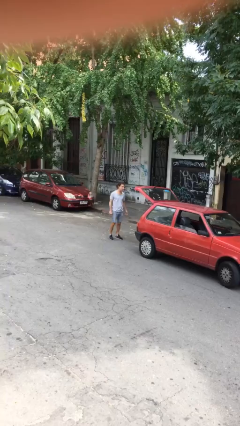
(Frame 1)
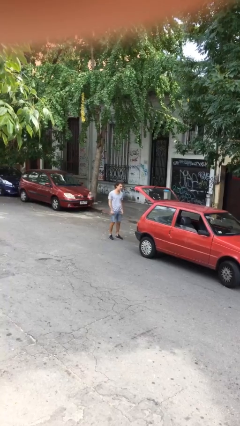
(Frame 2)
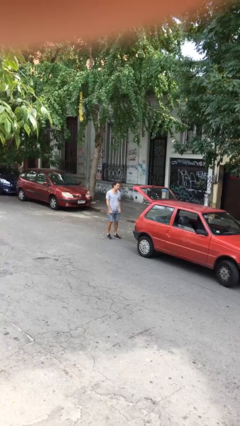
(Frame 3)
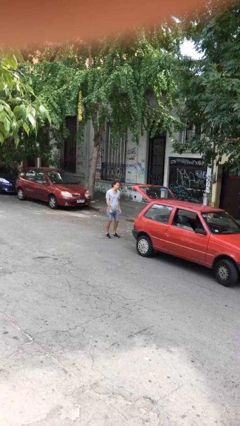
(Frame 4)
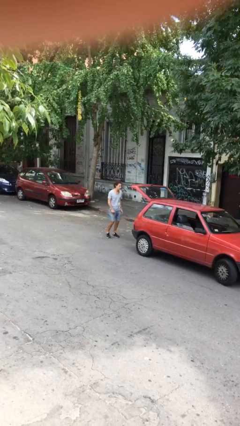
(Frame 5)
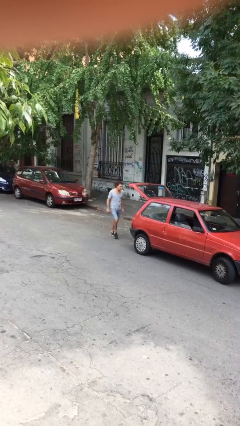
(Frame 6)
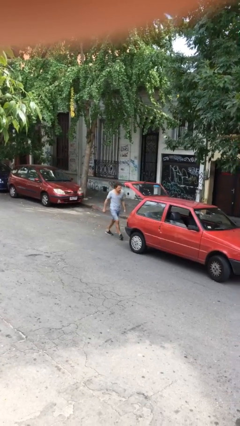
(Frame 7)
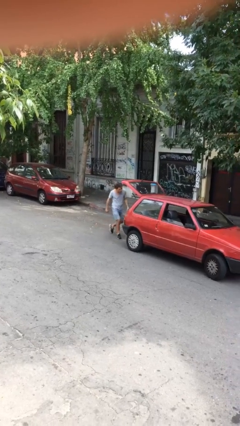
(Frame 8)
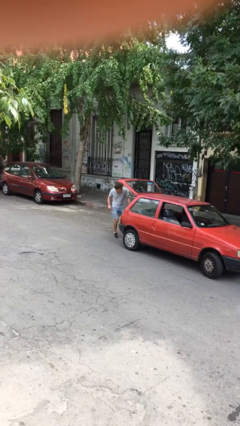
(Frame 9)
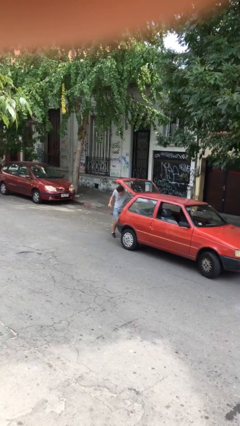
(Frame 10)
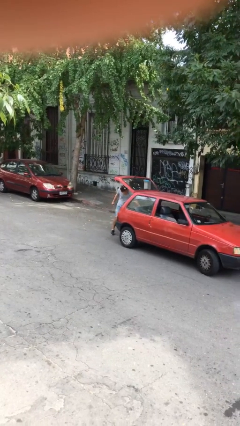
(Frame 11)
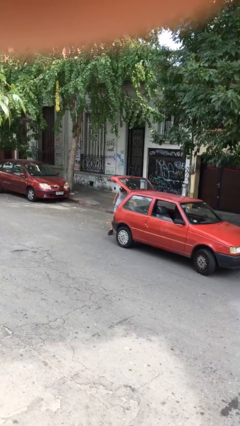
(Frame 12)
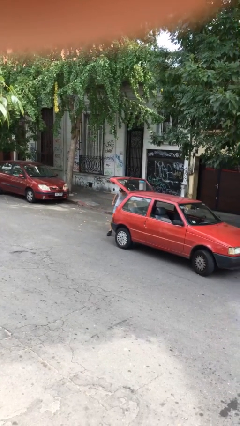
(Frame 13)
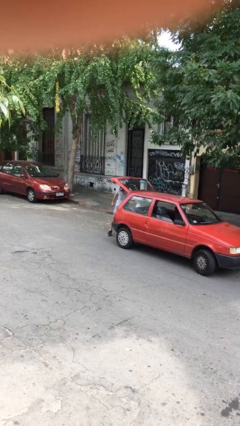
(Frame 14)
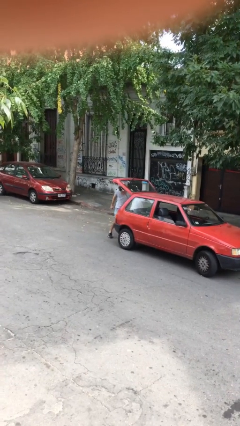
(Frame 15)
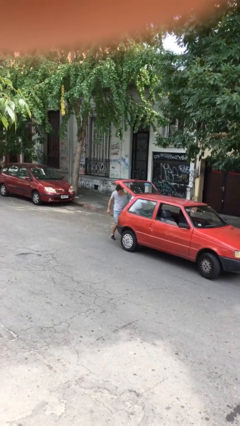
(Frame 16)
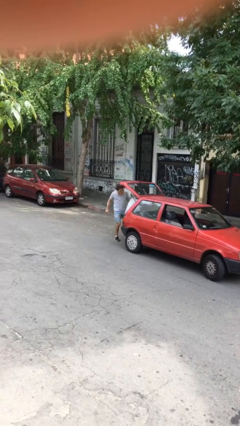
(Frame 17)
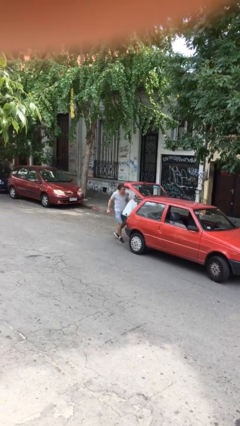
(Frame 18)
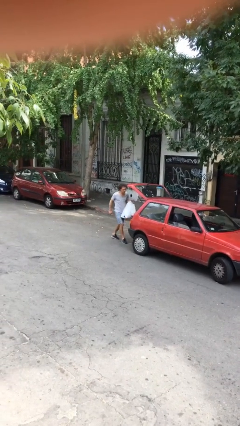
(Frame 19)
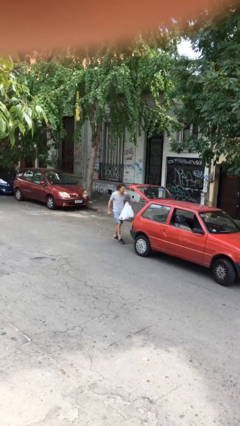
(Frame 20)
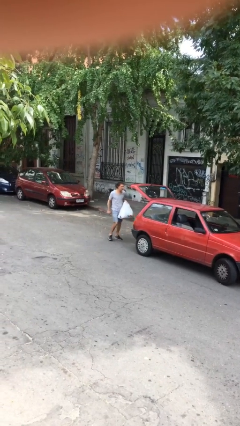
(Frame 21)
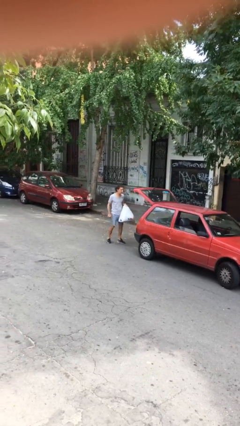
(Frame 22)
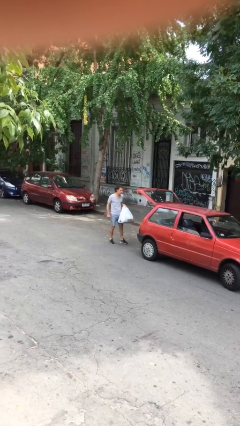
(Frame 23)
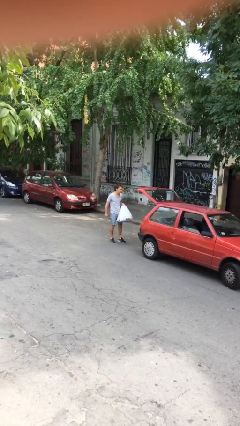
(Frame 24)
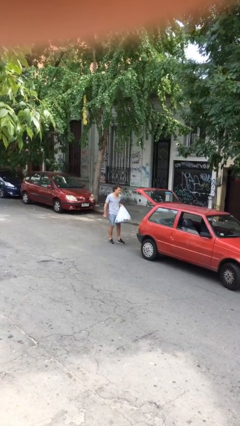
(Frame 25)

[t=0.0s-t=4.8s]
person unloads car

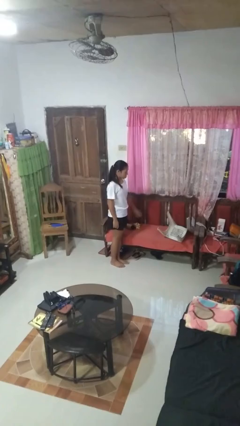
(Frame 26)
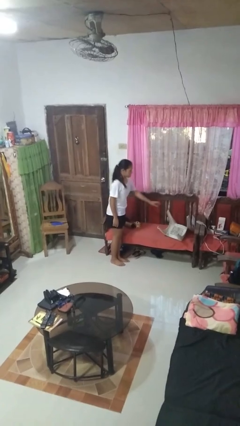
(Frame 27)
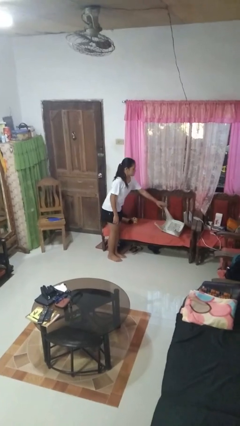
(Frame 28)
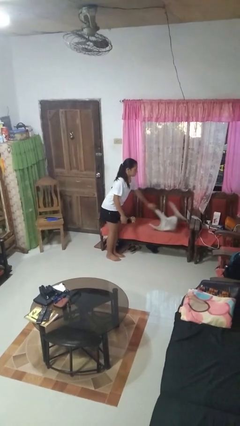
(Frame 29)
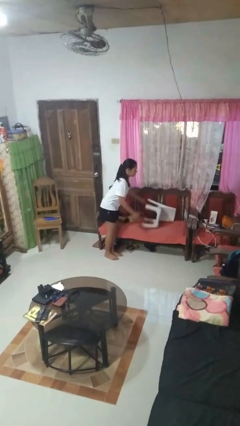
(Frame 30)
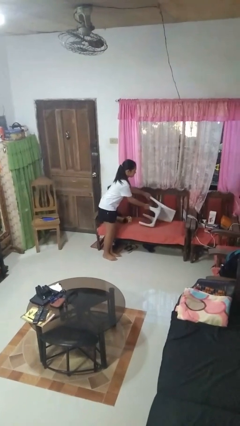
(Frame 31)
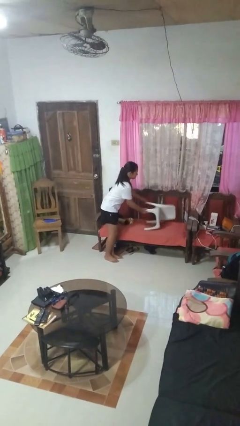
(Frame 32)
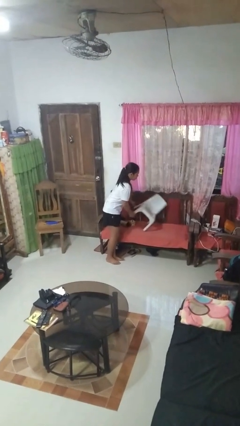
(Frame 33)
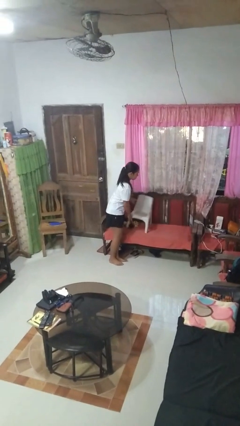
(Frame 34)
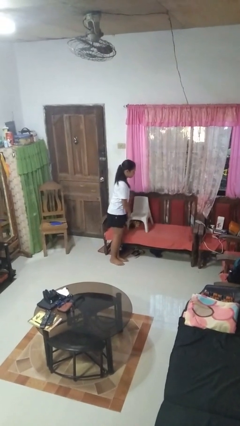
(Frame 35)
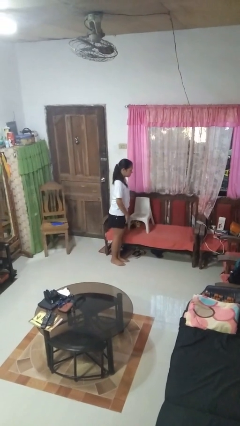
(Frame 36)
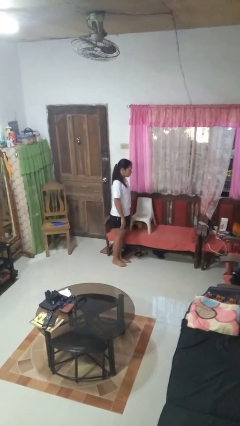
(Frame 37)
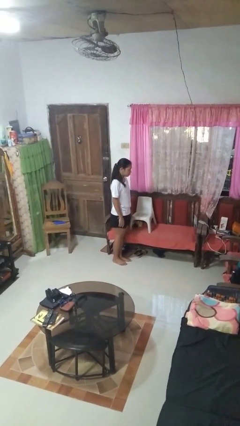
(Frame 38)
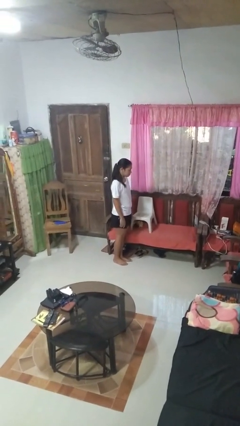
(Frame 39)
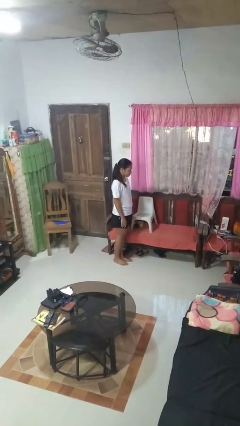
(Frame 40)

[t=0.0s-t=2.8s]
person sets upright furniture

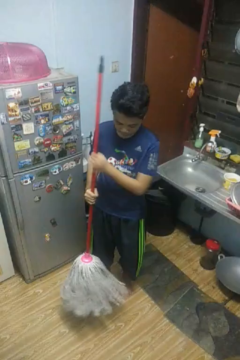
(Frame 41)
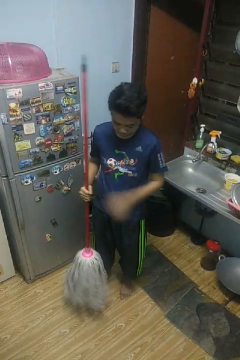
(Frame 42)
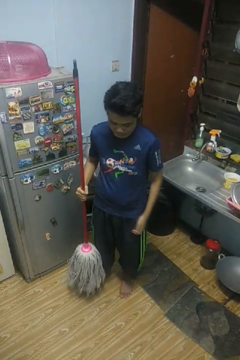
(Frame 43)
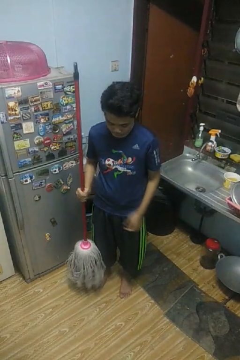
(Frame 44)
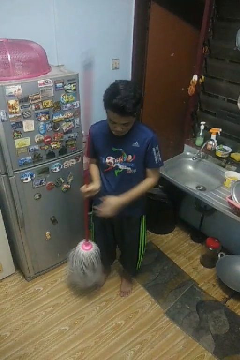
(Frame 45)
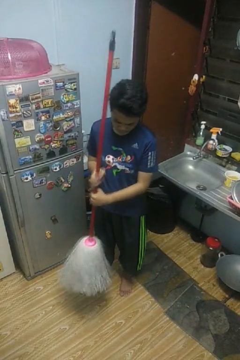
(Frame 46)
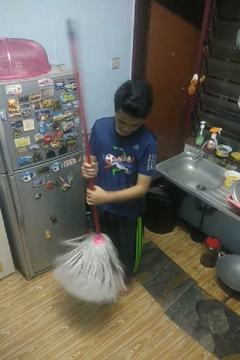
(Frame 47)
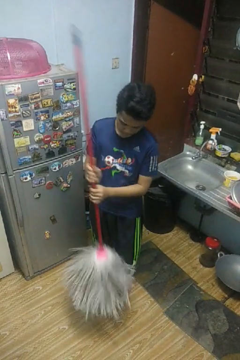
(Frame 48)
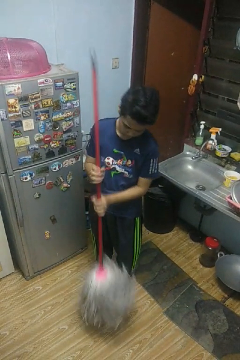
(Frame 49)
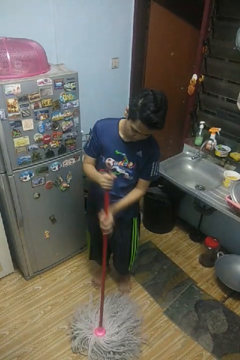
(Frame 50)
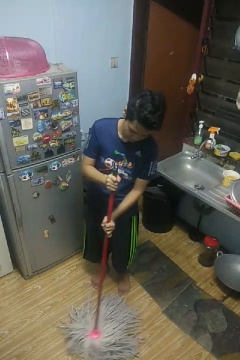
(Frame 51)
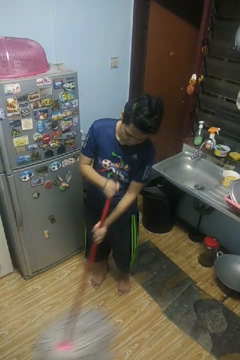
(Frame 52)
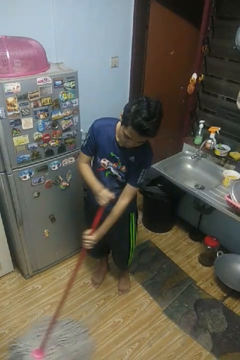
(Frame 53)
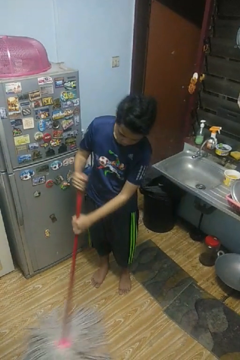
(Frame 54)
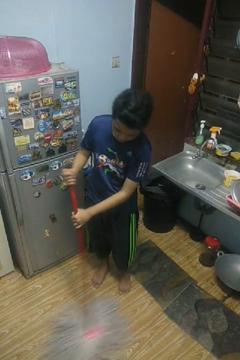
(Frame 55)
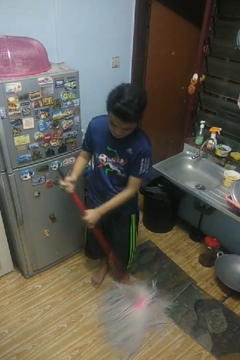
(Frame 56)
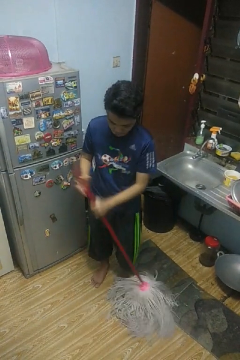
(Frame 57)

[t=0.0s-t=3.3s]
person mops

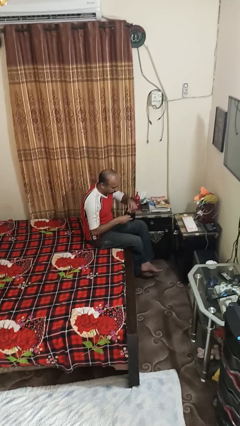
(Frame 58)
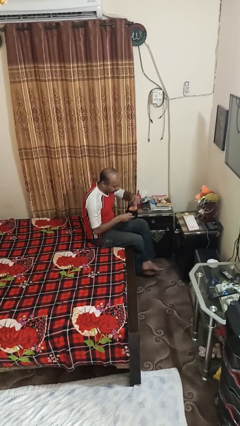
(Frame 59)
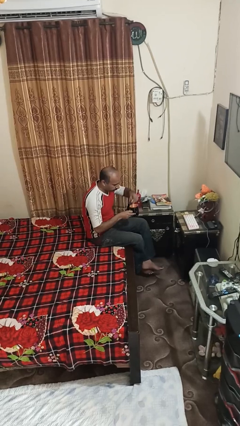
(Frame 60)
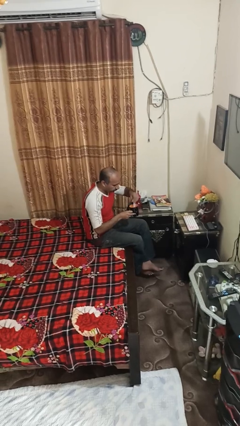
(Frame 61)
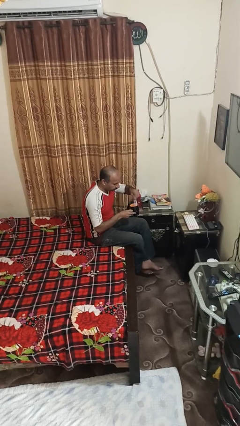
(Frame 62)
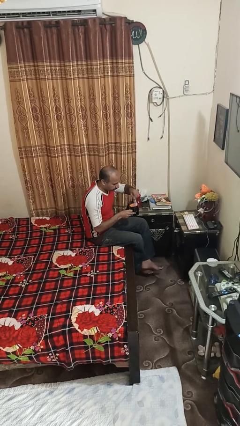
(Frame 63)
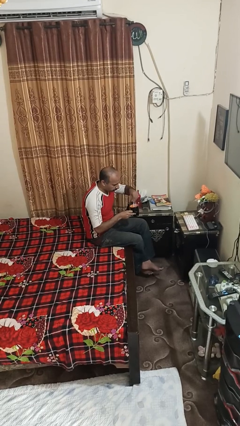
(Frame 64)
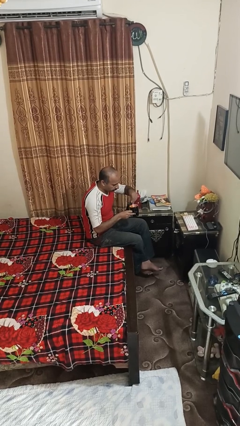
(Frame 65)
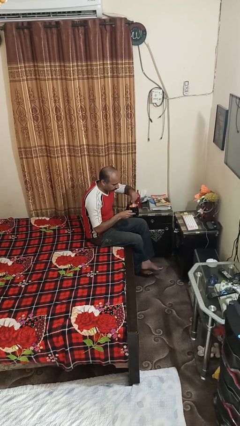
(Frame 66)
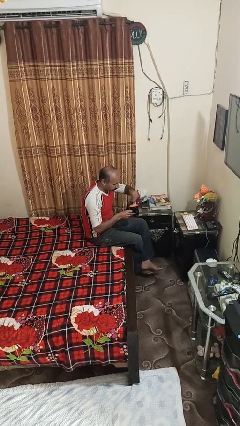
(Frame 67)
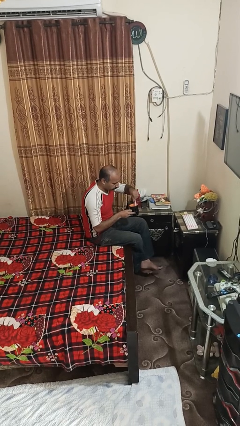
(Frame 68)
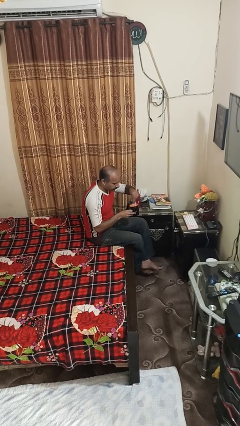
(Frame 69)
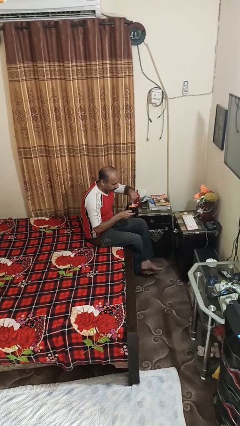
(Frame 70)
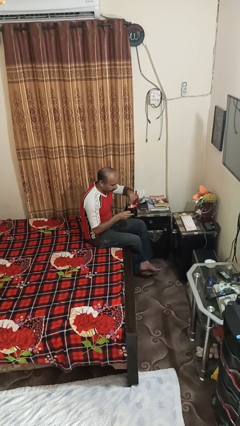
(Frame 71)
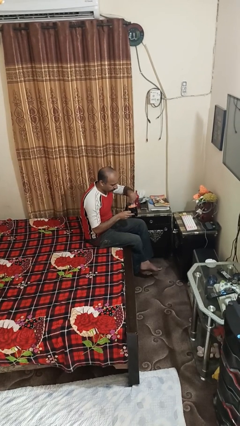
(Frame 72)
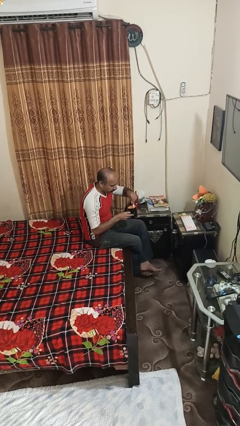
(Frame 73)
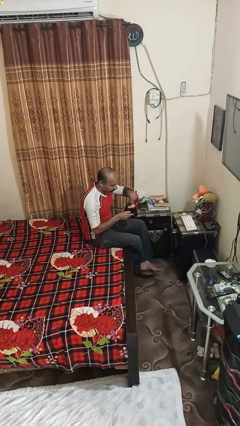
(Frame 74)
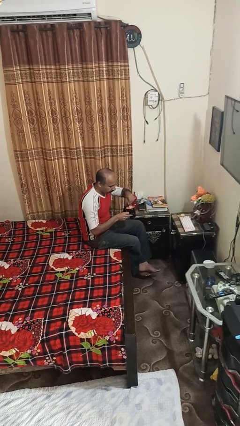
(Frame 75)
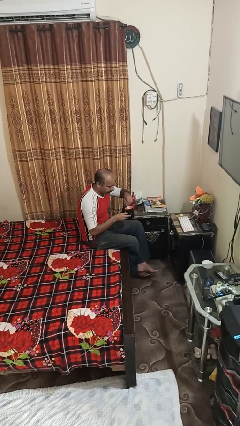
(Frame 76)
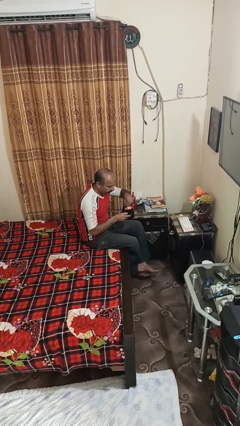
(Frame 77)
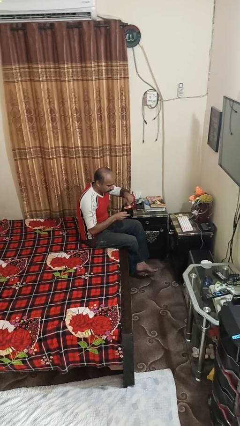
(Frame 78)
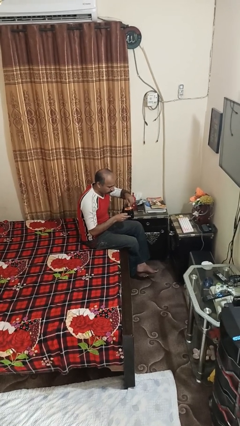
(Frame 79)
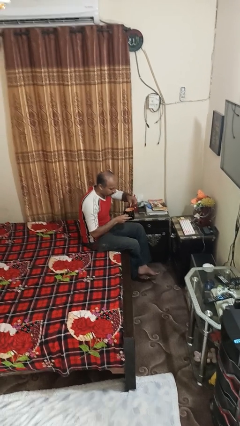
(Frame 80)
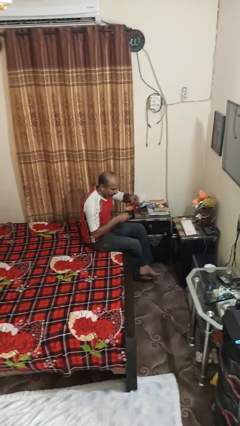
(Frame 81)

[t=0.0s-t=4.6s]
person stirs mug

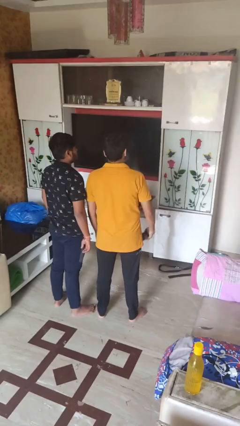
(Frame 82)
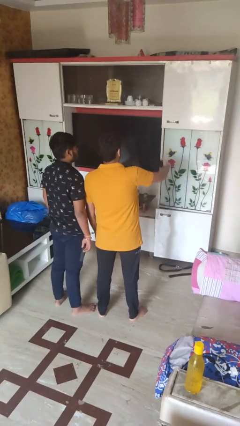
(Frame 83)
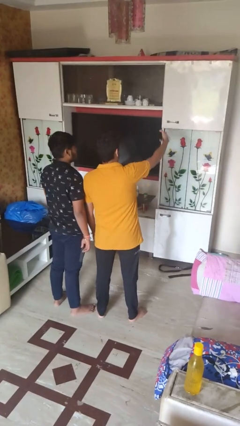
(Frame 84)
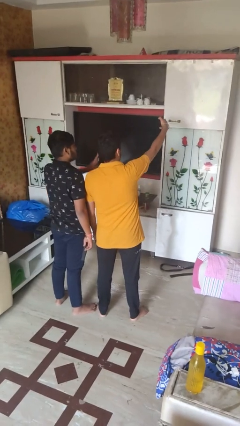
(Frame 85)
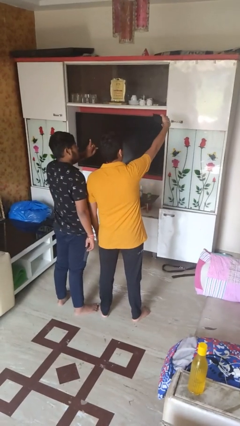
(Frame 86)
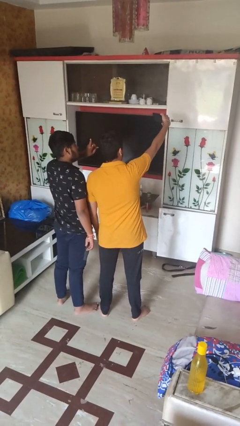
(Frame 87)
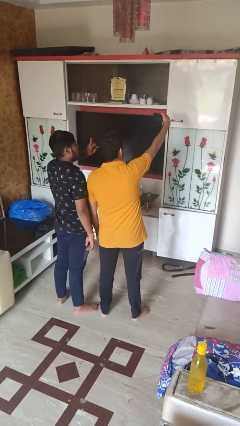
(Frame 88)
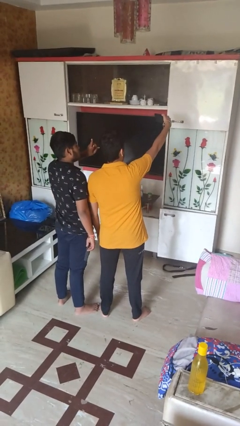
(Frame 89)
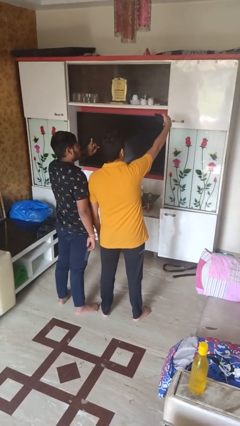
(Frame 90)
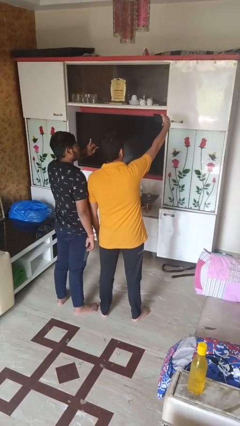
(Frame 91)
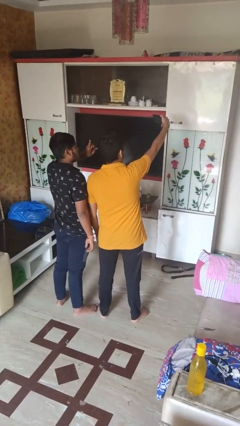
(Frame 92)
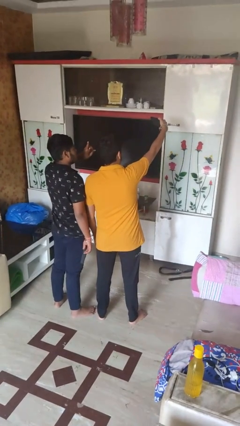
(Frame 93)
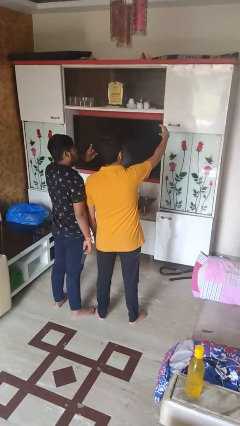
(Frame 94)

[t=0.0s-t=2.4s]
person takes selfie with person

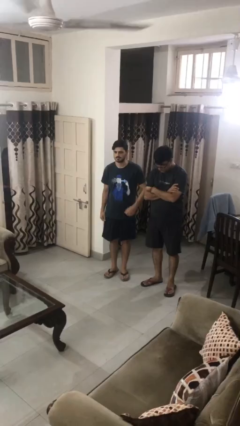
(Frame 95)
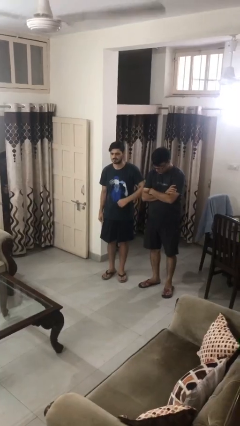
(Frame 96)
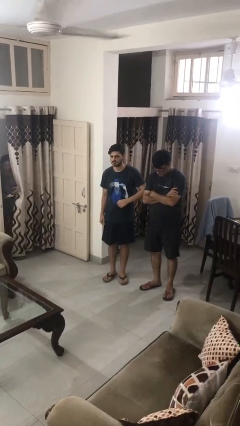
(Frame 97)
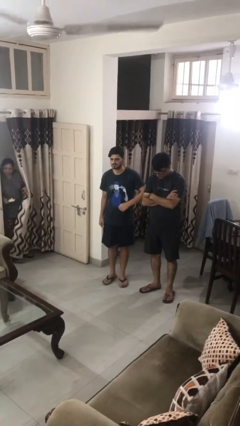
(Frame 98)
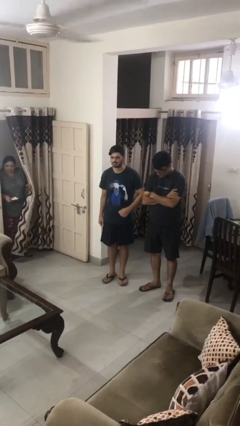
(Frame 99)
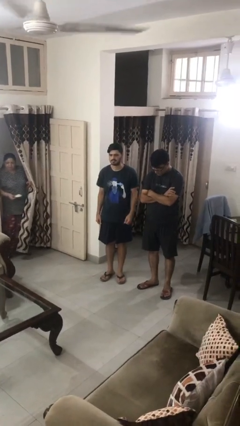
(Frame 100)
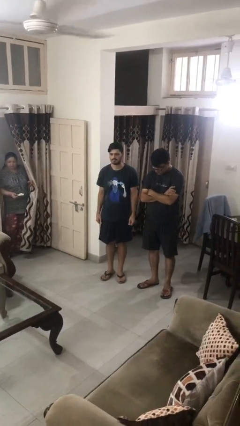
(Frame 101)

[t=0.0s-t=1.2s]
person nudges person with elbow
